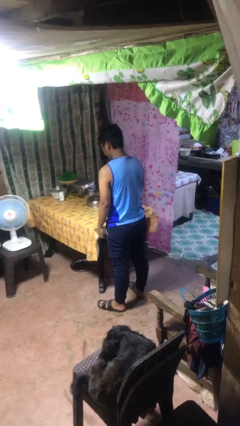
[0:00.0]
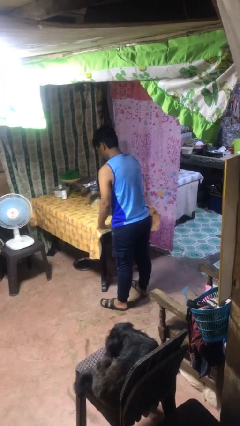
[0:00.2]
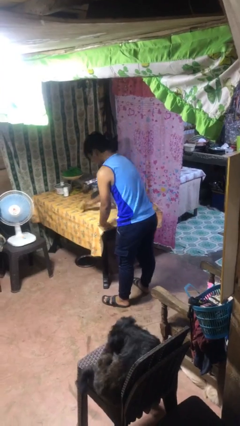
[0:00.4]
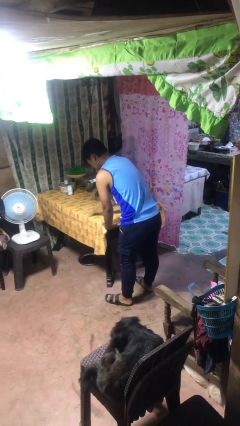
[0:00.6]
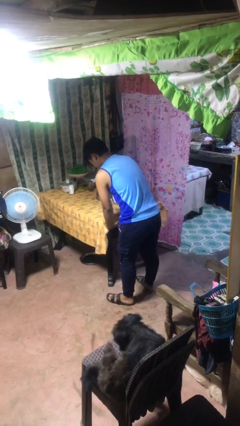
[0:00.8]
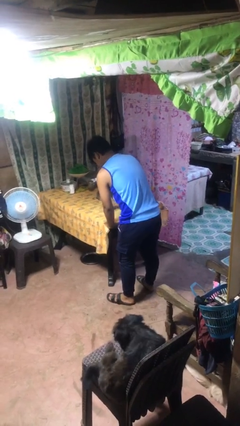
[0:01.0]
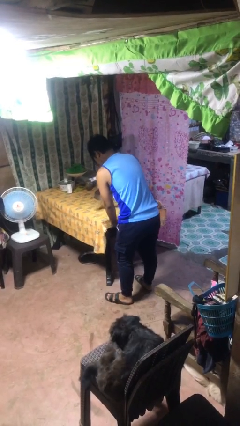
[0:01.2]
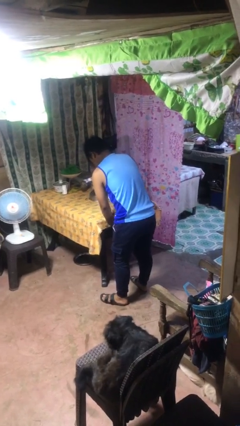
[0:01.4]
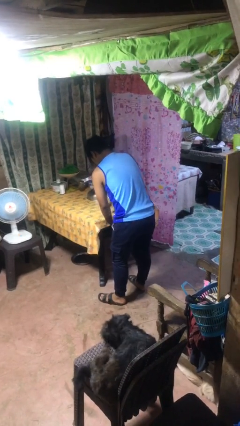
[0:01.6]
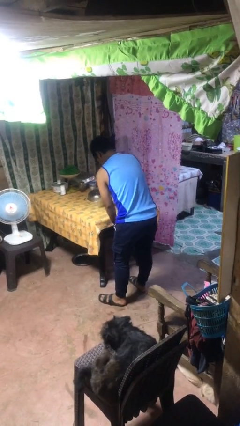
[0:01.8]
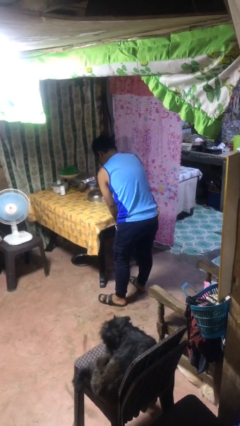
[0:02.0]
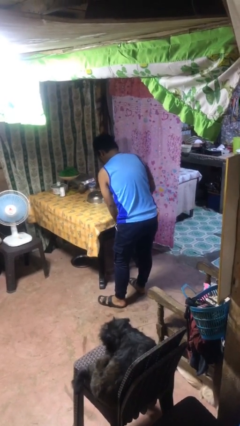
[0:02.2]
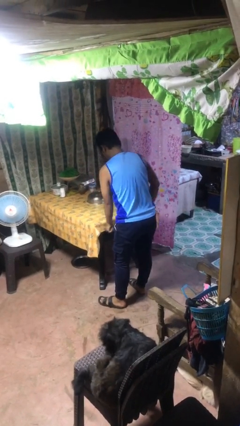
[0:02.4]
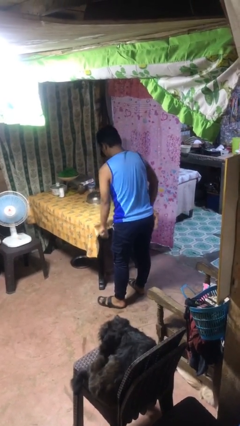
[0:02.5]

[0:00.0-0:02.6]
person cleans table with rag

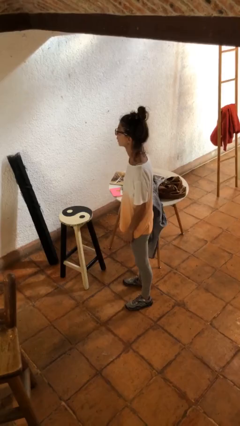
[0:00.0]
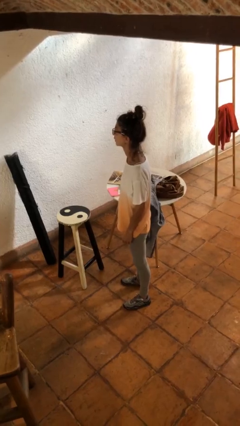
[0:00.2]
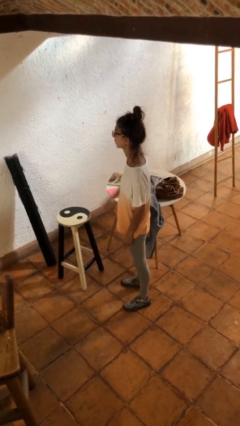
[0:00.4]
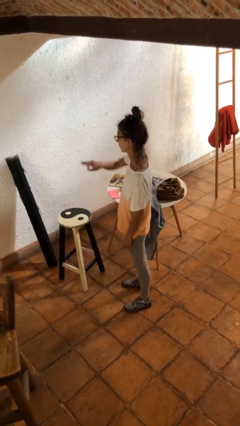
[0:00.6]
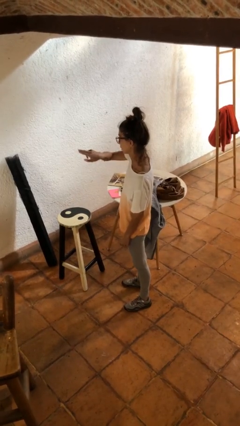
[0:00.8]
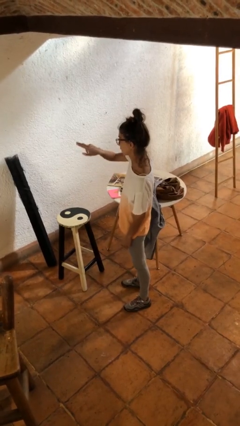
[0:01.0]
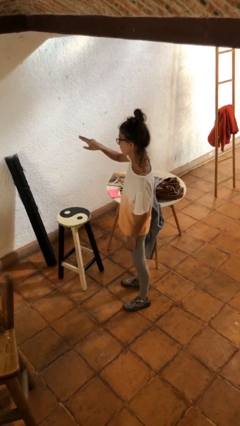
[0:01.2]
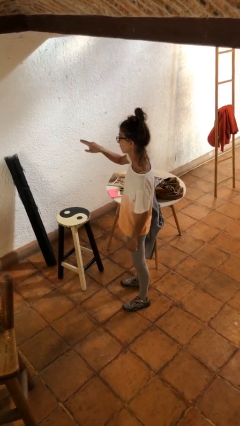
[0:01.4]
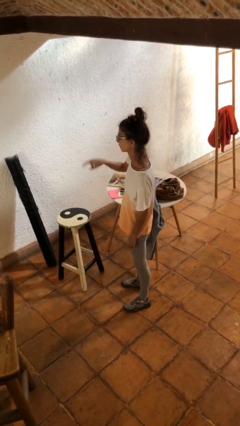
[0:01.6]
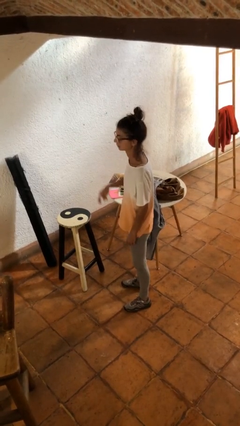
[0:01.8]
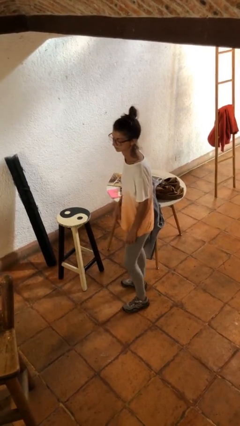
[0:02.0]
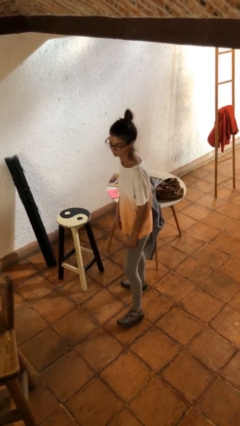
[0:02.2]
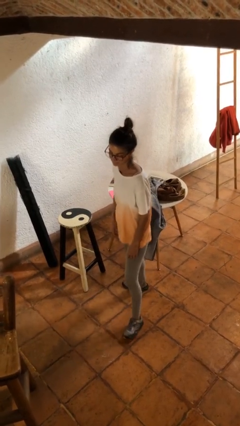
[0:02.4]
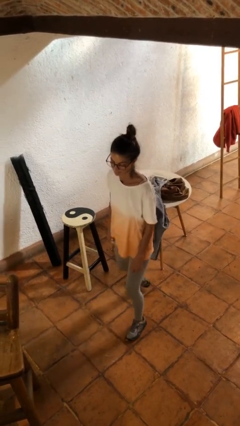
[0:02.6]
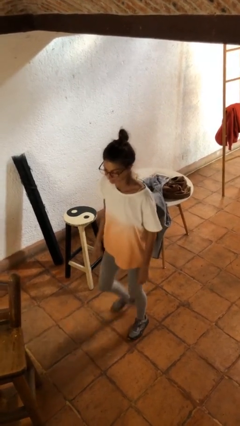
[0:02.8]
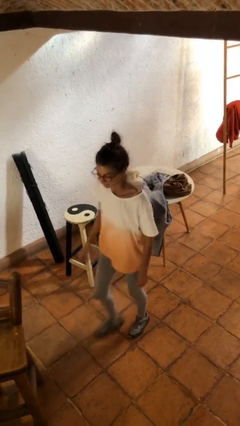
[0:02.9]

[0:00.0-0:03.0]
person gestures swipe right

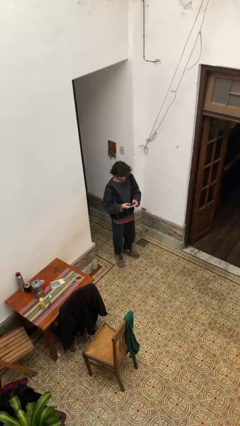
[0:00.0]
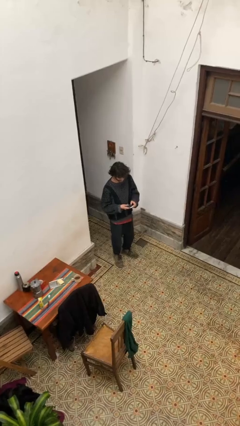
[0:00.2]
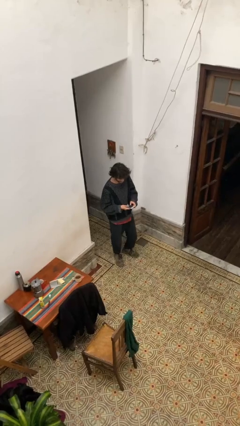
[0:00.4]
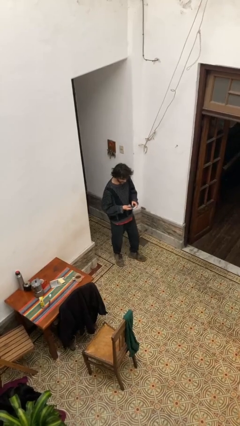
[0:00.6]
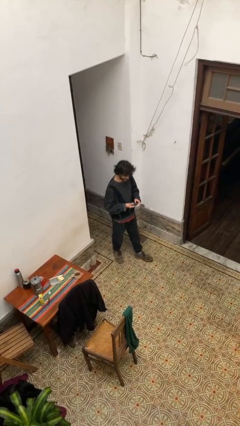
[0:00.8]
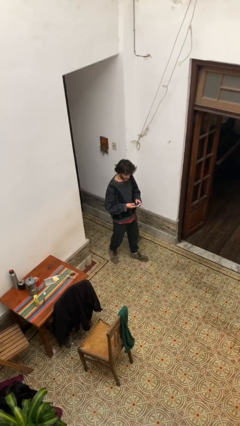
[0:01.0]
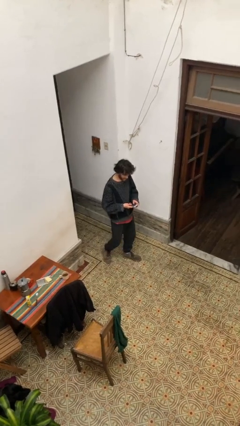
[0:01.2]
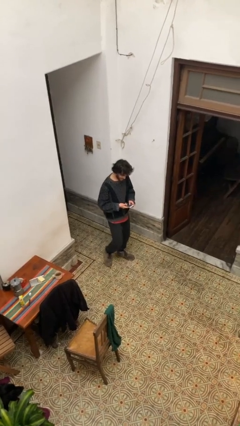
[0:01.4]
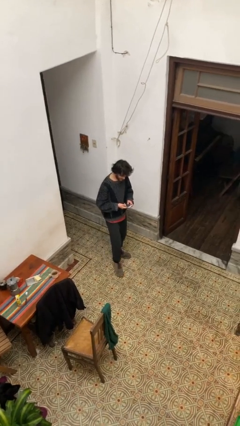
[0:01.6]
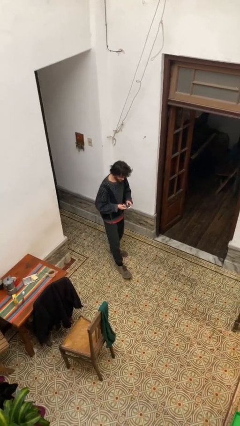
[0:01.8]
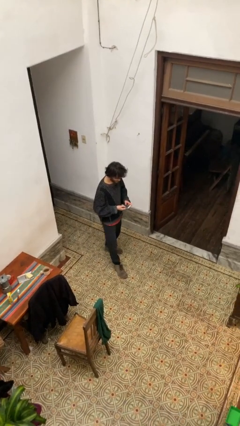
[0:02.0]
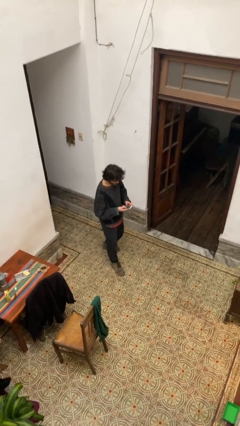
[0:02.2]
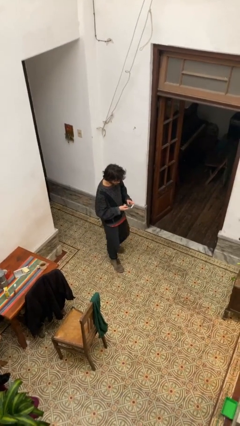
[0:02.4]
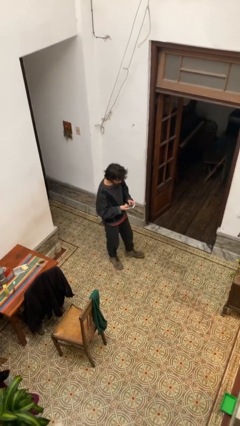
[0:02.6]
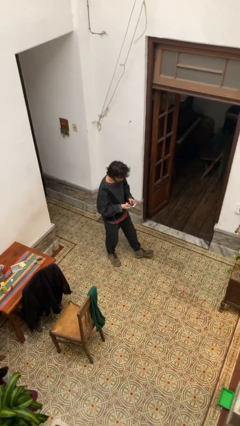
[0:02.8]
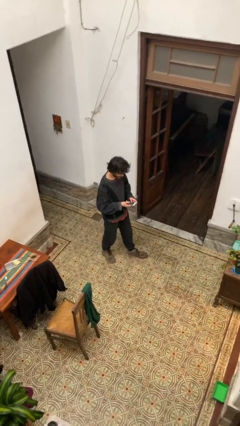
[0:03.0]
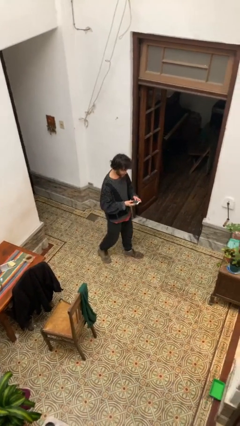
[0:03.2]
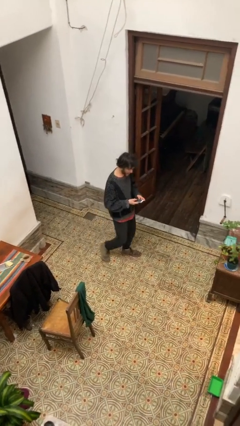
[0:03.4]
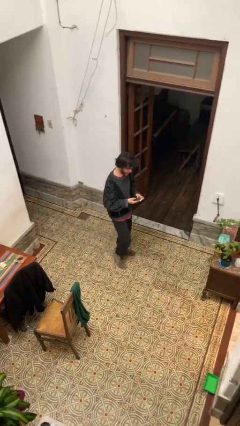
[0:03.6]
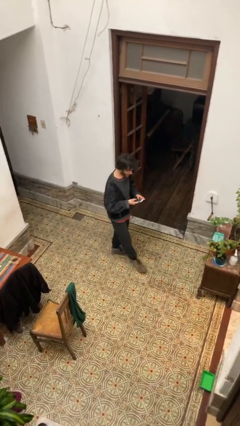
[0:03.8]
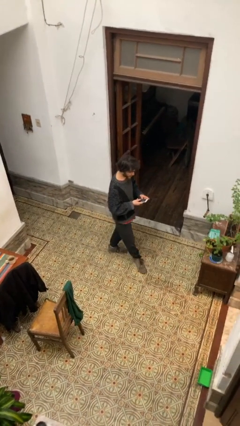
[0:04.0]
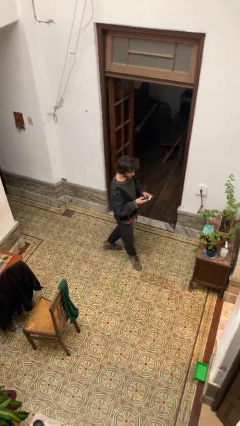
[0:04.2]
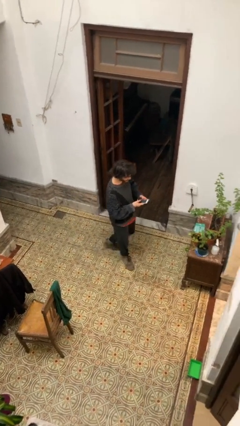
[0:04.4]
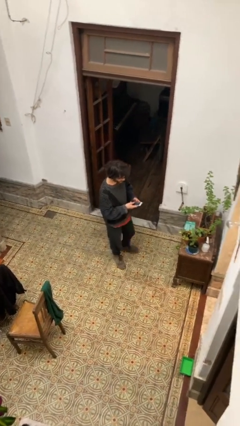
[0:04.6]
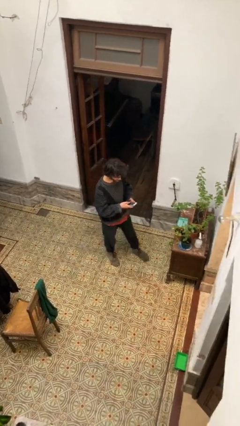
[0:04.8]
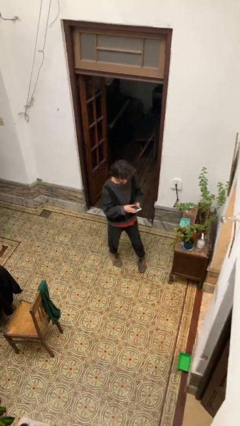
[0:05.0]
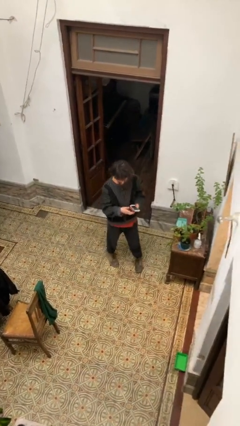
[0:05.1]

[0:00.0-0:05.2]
person texts on phone

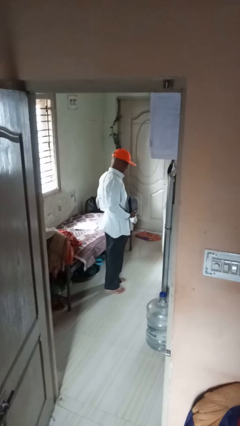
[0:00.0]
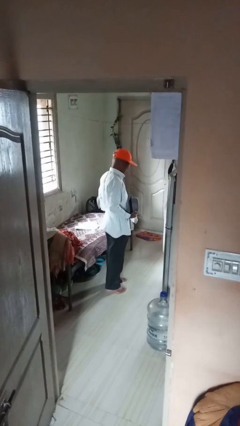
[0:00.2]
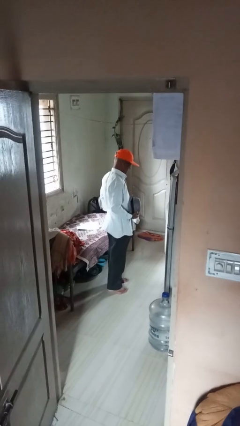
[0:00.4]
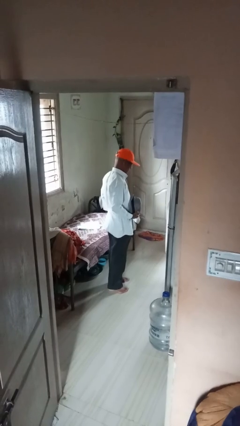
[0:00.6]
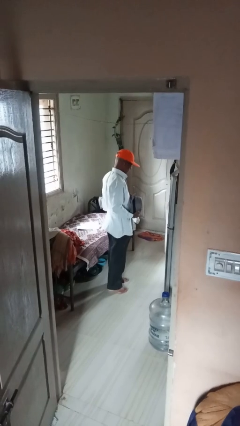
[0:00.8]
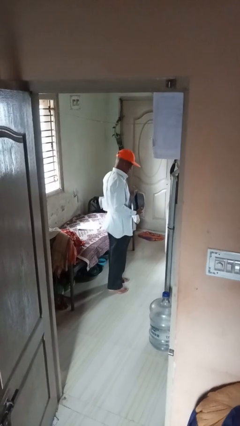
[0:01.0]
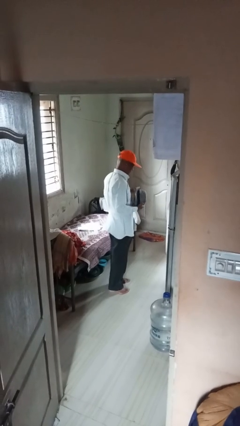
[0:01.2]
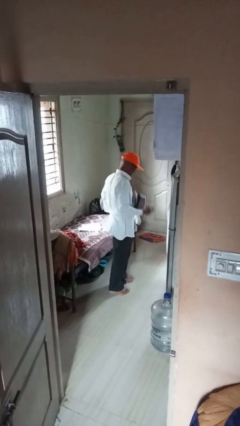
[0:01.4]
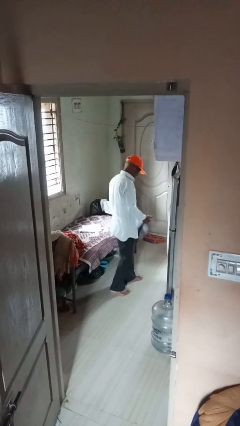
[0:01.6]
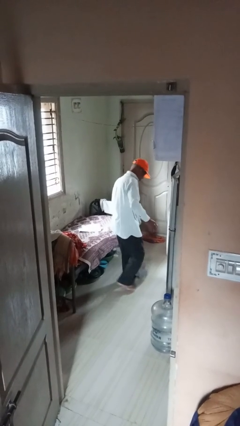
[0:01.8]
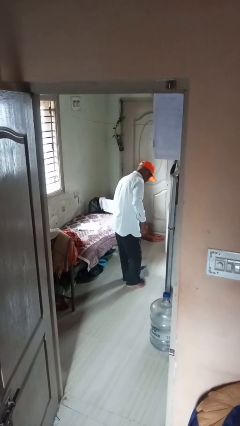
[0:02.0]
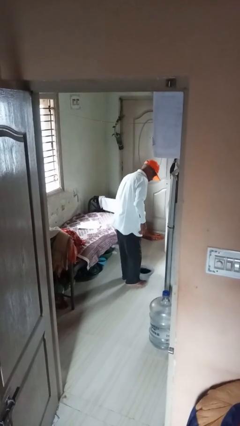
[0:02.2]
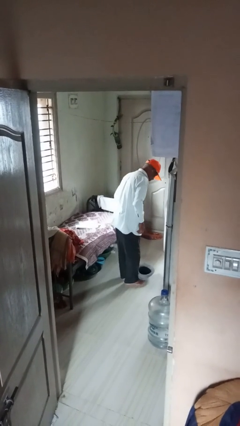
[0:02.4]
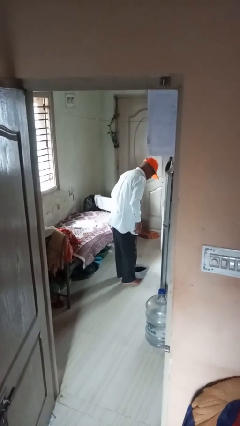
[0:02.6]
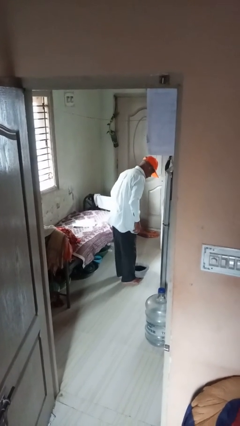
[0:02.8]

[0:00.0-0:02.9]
person drops object

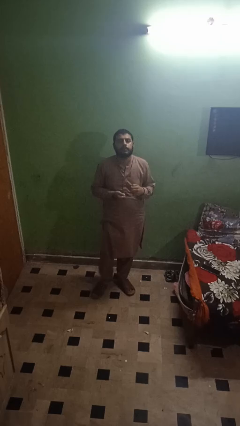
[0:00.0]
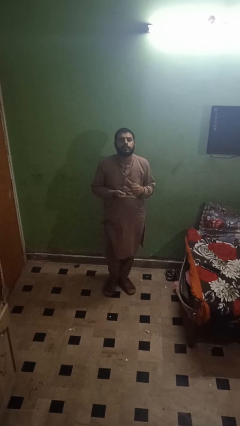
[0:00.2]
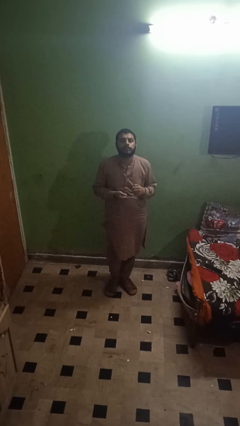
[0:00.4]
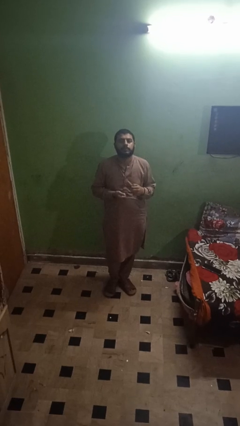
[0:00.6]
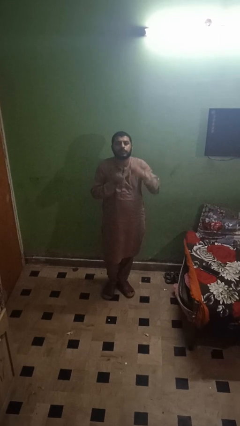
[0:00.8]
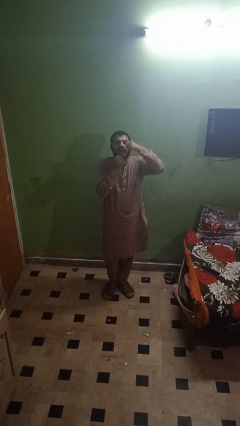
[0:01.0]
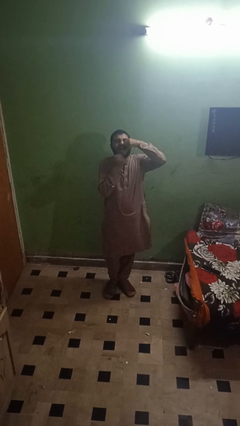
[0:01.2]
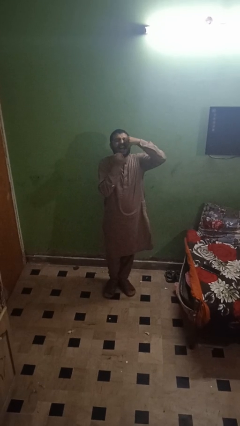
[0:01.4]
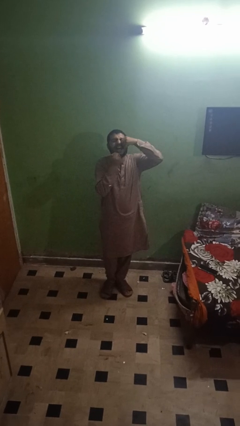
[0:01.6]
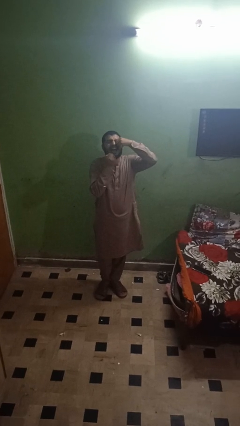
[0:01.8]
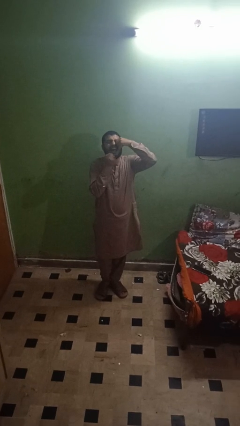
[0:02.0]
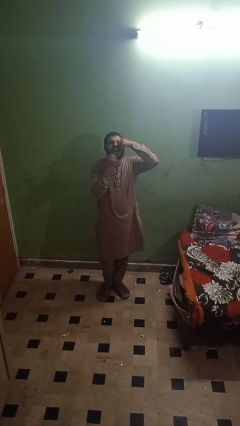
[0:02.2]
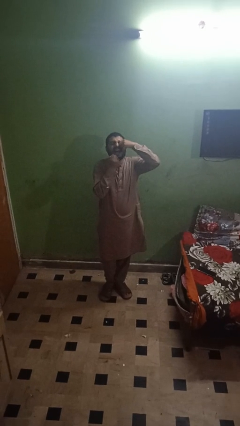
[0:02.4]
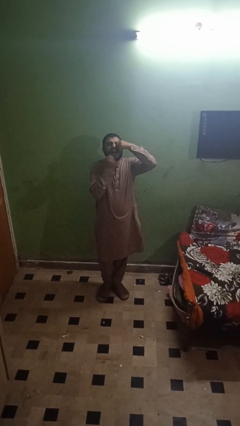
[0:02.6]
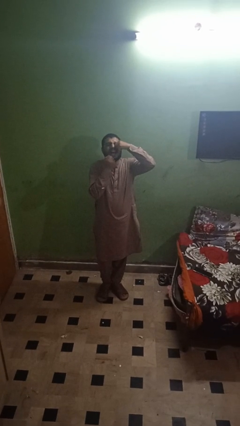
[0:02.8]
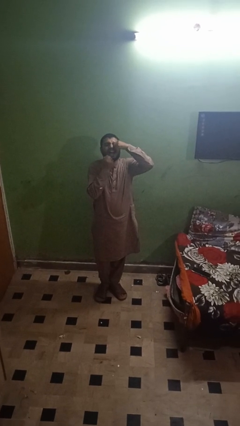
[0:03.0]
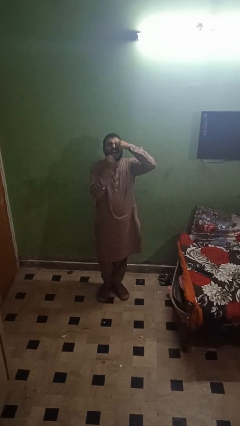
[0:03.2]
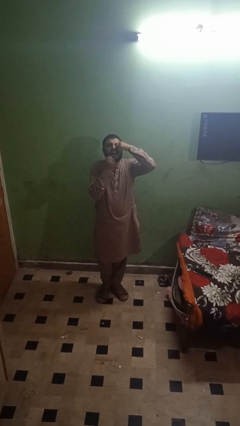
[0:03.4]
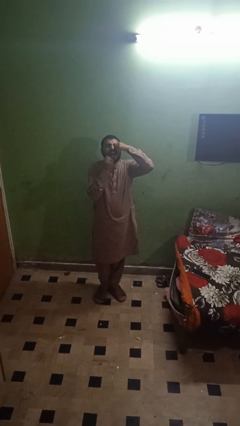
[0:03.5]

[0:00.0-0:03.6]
person flosses
